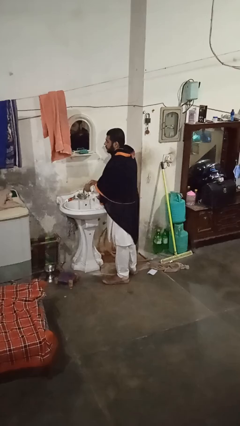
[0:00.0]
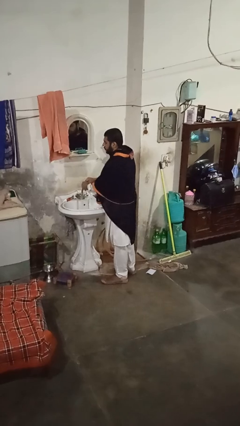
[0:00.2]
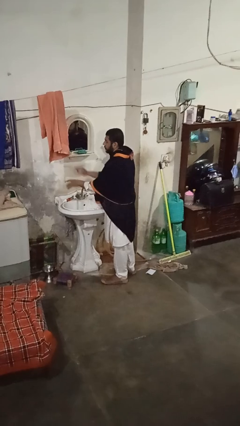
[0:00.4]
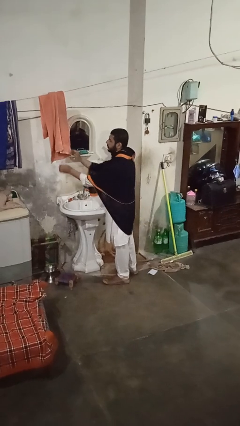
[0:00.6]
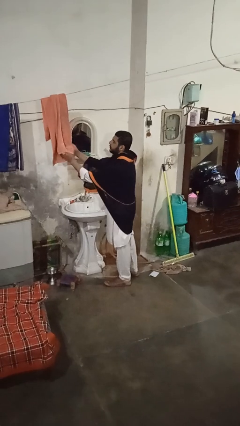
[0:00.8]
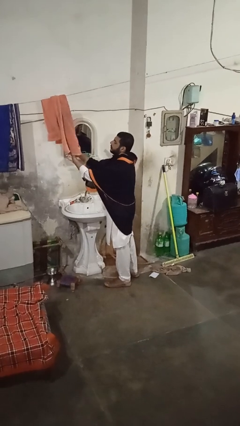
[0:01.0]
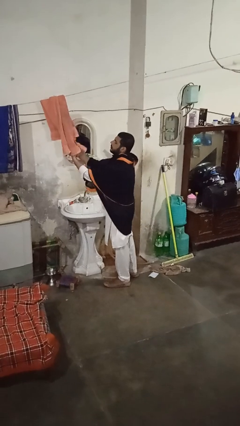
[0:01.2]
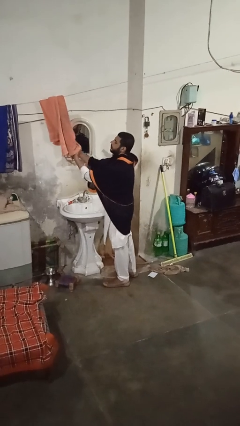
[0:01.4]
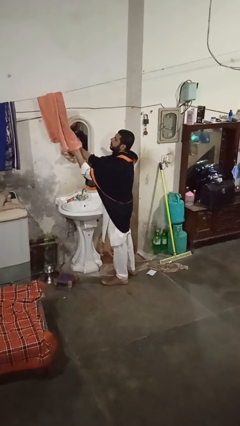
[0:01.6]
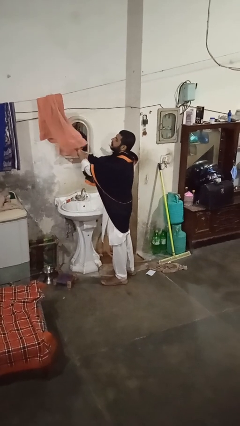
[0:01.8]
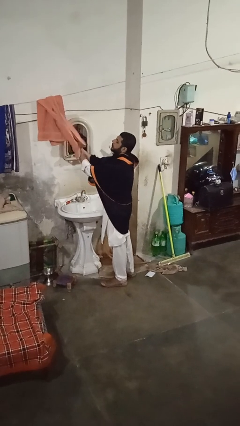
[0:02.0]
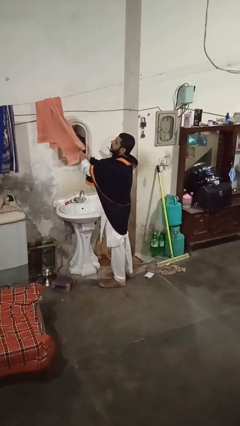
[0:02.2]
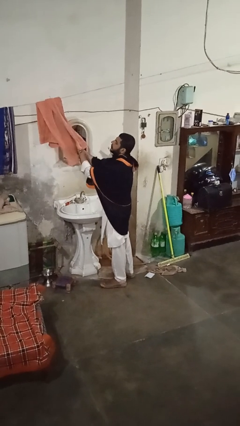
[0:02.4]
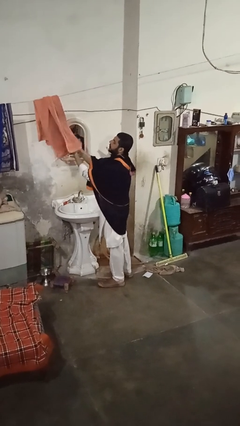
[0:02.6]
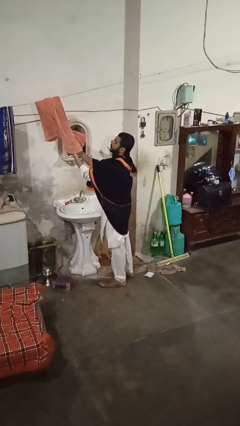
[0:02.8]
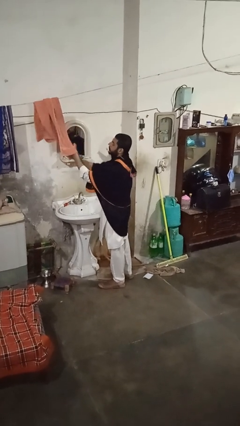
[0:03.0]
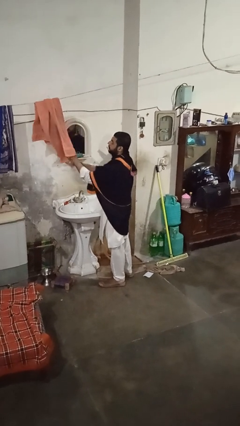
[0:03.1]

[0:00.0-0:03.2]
person dries hands with towel

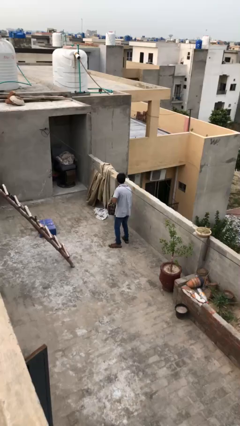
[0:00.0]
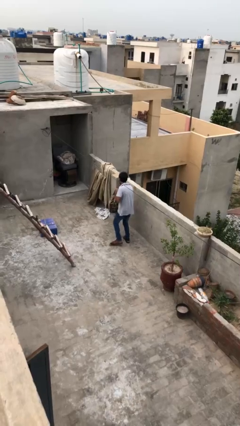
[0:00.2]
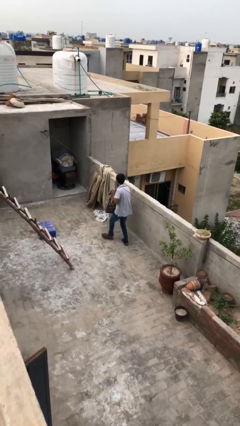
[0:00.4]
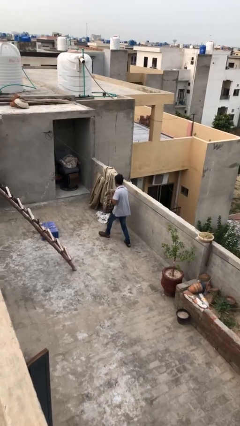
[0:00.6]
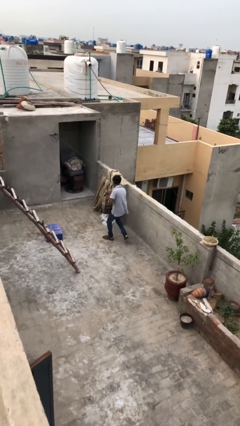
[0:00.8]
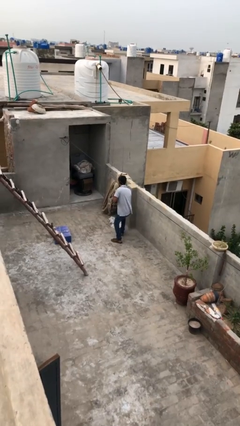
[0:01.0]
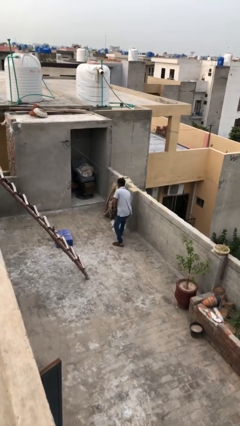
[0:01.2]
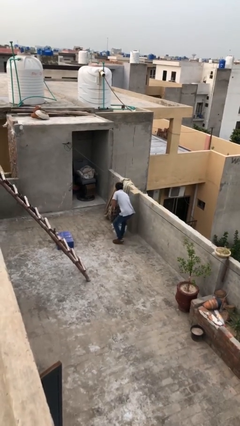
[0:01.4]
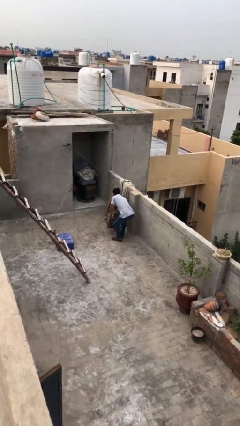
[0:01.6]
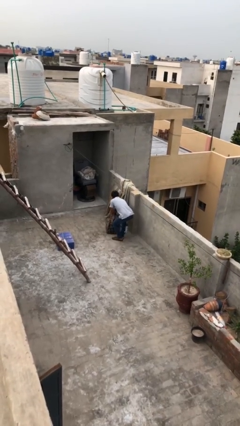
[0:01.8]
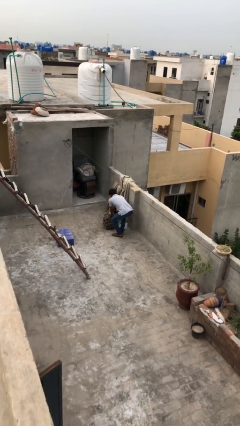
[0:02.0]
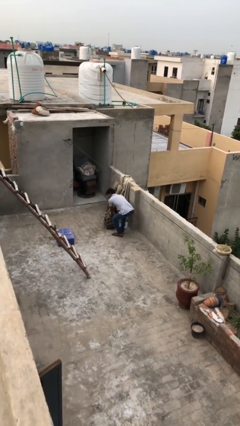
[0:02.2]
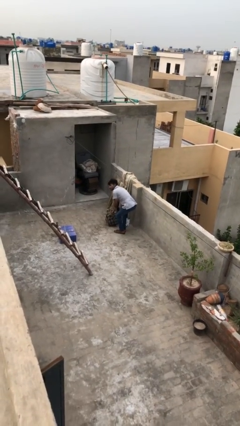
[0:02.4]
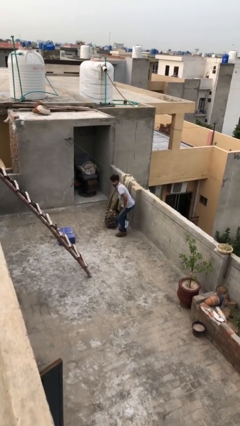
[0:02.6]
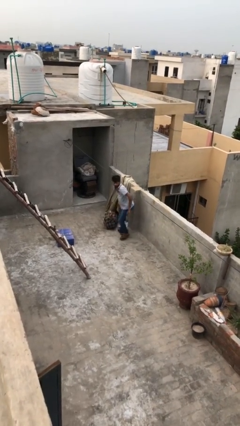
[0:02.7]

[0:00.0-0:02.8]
person puts down object on floor

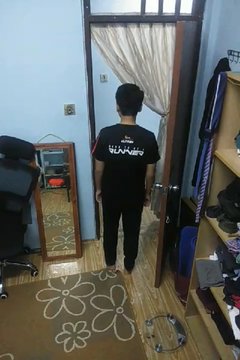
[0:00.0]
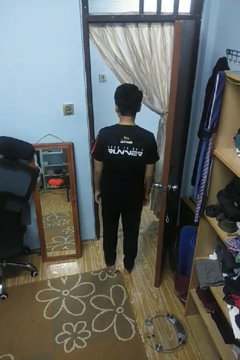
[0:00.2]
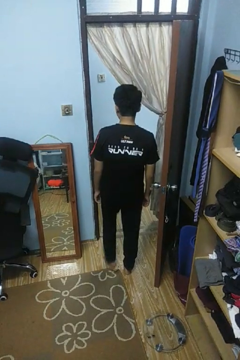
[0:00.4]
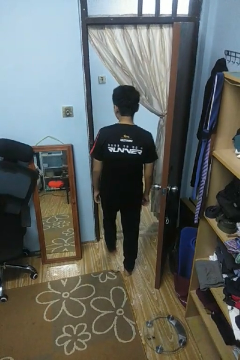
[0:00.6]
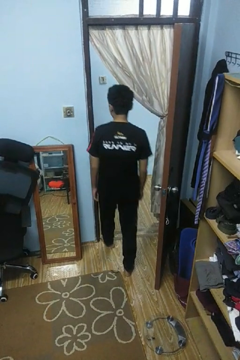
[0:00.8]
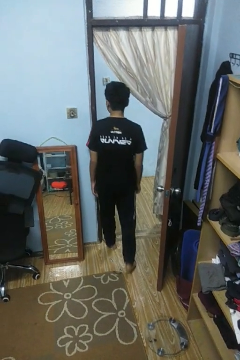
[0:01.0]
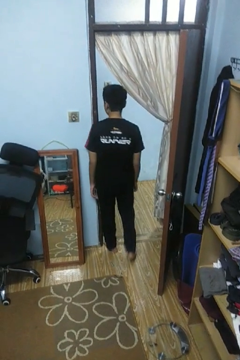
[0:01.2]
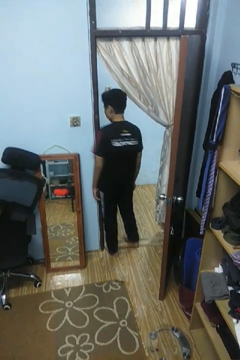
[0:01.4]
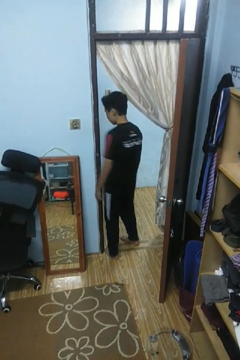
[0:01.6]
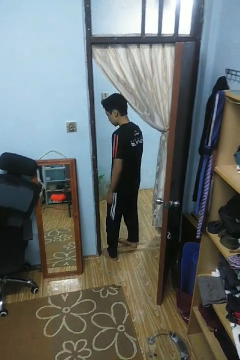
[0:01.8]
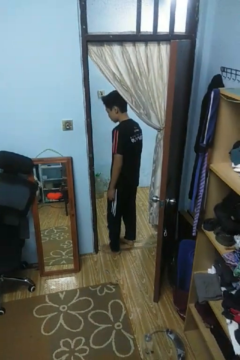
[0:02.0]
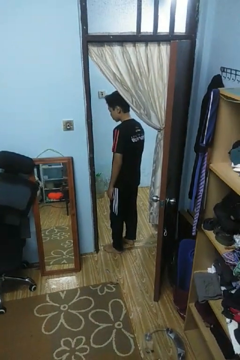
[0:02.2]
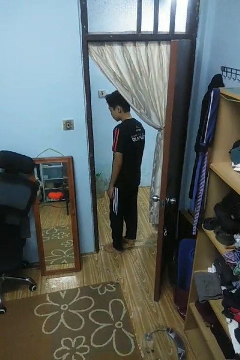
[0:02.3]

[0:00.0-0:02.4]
person bumps into wall

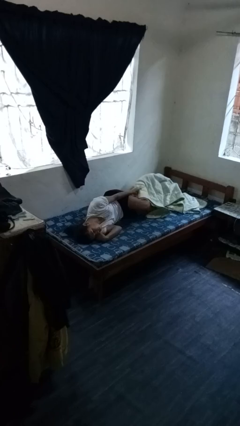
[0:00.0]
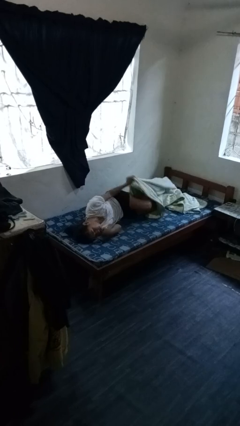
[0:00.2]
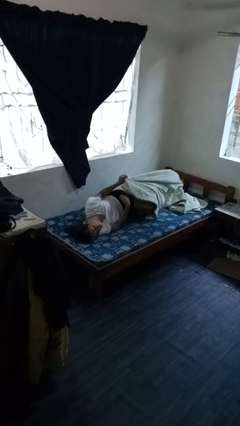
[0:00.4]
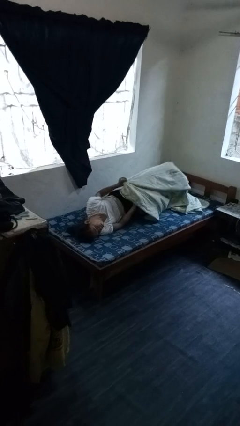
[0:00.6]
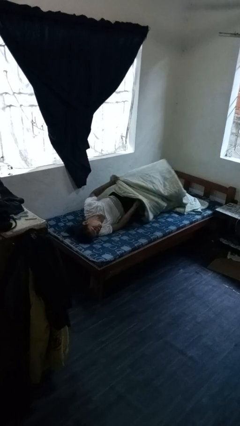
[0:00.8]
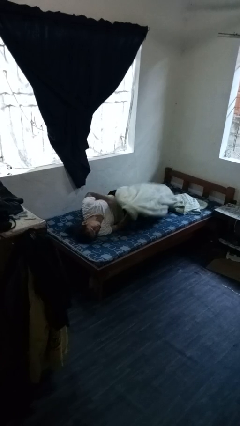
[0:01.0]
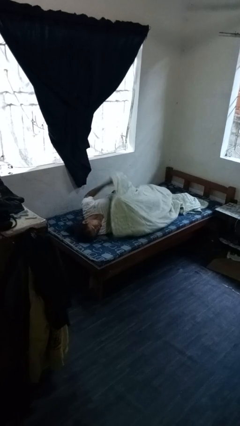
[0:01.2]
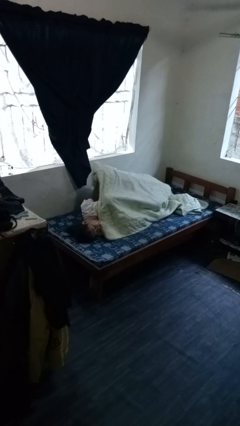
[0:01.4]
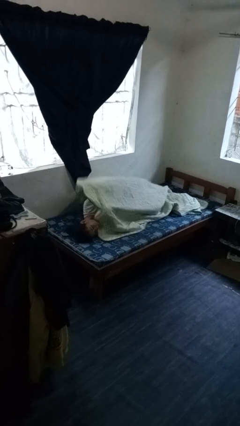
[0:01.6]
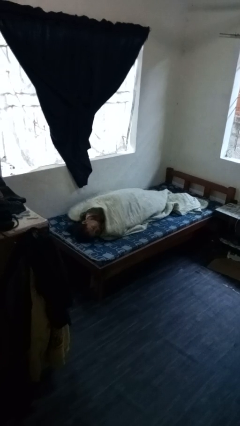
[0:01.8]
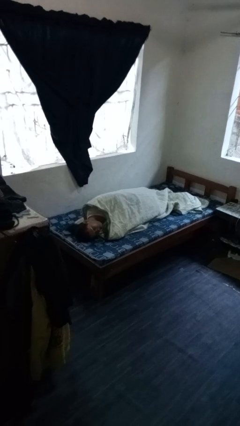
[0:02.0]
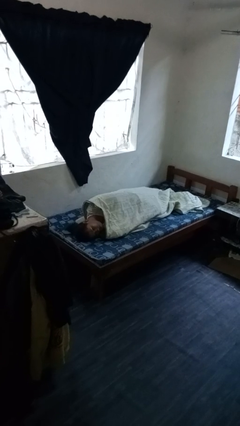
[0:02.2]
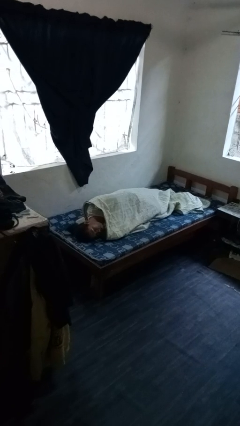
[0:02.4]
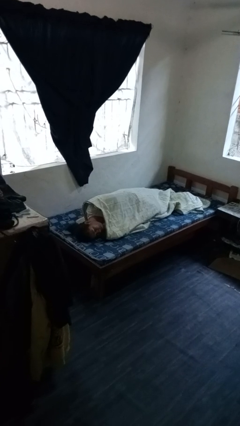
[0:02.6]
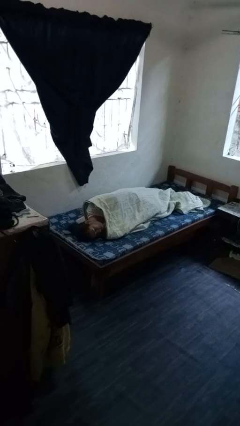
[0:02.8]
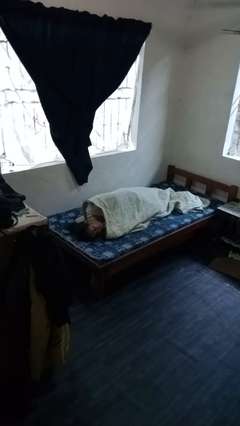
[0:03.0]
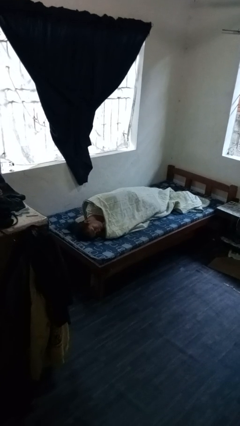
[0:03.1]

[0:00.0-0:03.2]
person covers with bedsheets

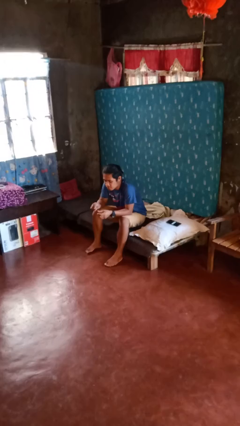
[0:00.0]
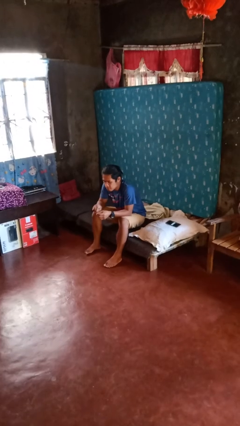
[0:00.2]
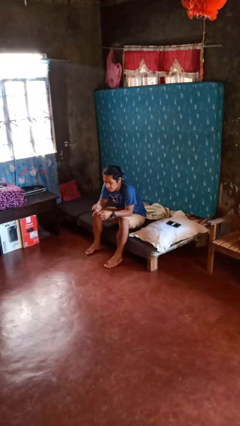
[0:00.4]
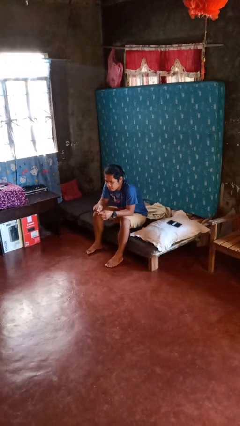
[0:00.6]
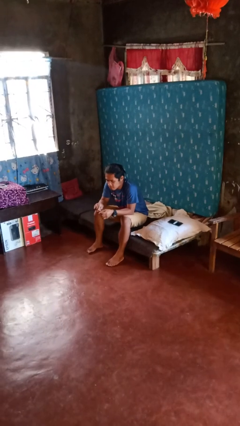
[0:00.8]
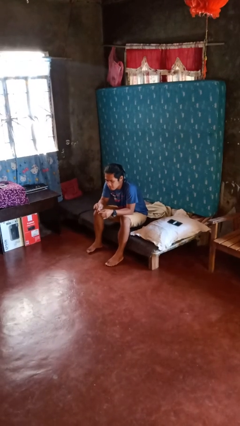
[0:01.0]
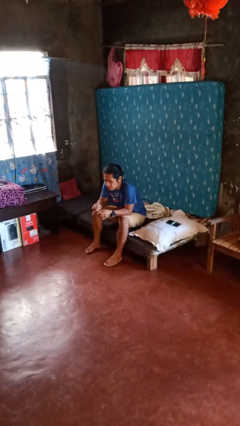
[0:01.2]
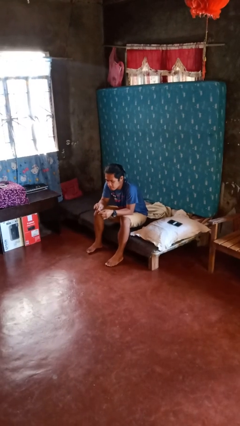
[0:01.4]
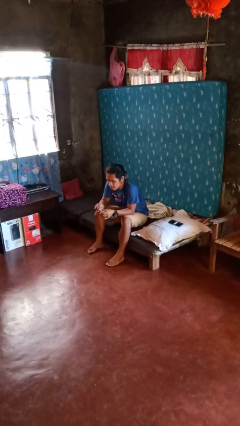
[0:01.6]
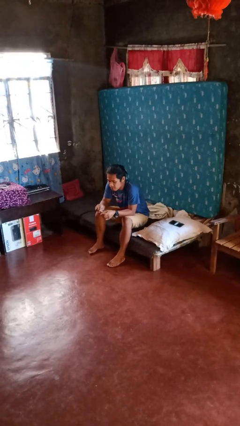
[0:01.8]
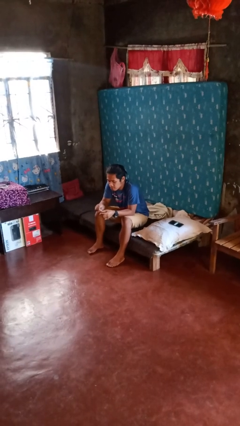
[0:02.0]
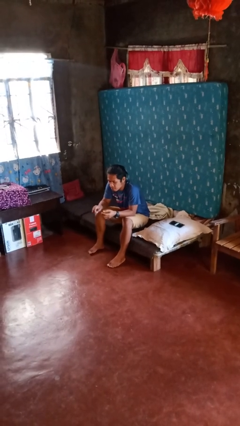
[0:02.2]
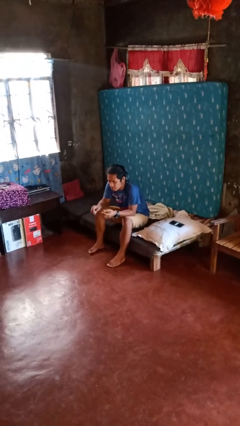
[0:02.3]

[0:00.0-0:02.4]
person files fingernails

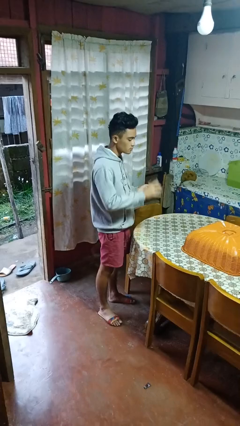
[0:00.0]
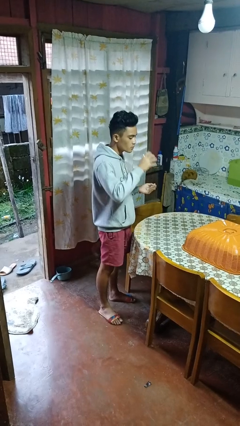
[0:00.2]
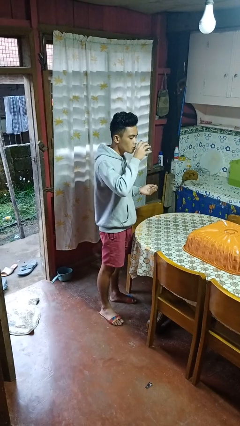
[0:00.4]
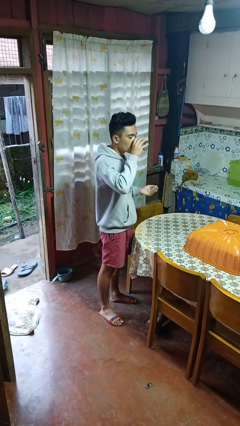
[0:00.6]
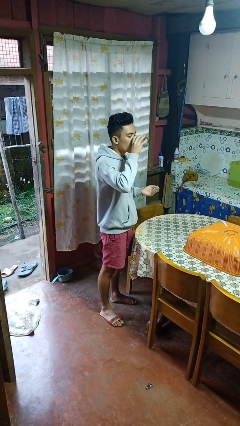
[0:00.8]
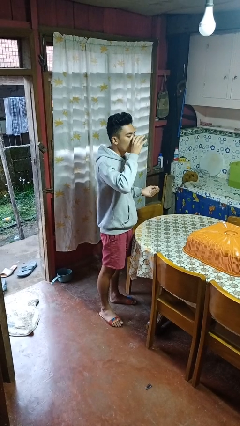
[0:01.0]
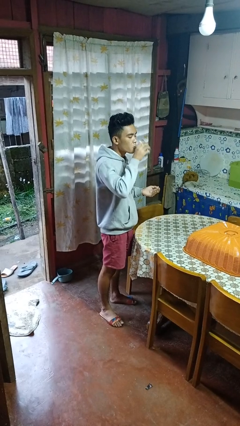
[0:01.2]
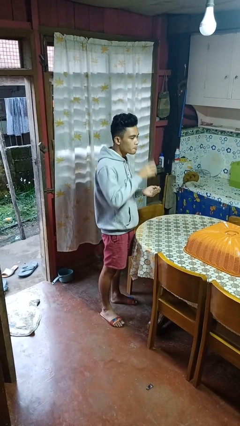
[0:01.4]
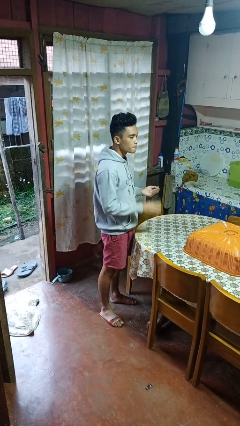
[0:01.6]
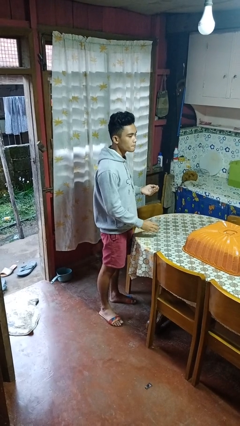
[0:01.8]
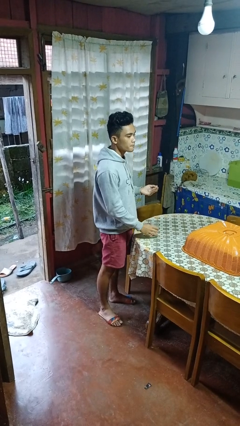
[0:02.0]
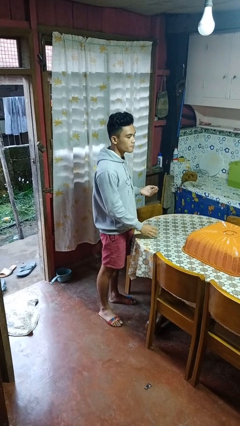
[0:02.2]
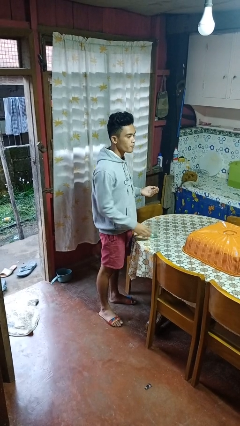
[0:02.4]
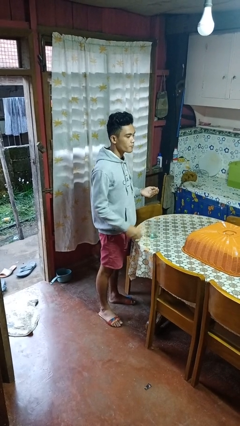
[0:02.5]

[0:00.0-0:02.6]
person drinks from cup

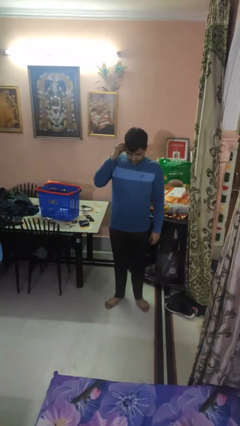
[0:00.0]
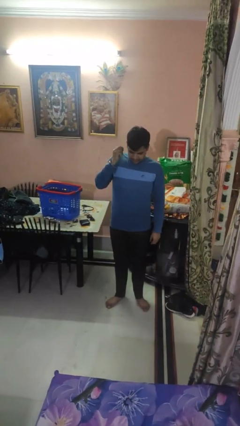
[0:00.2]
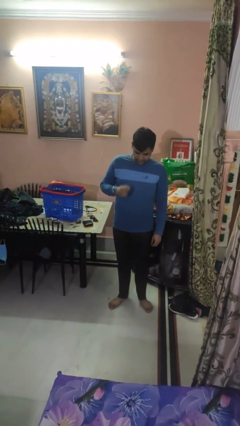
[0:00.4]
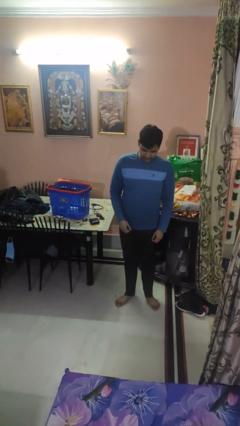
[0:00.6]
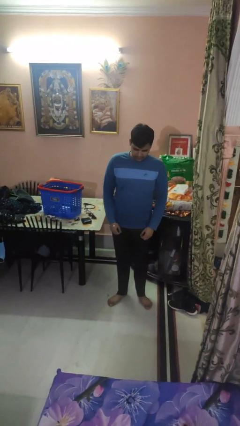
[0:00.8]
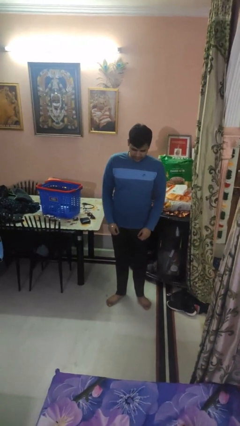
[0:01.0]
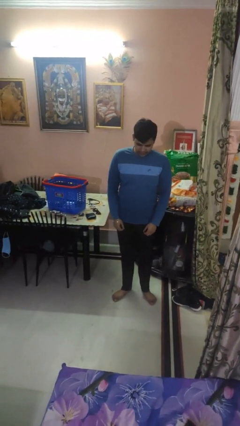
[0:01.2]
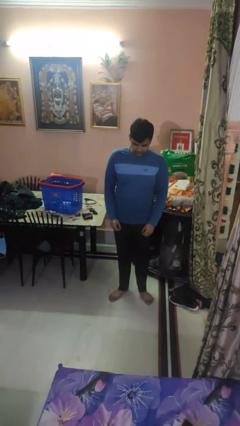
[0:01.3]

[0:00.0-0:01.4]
person puts on earrings
